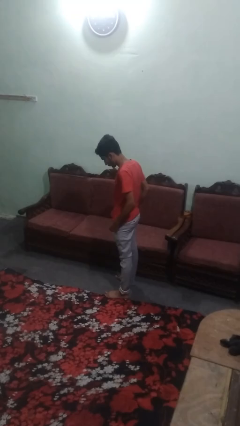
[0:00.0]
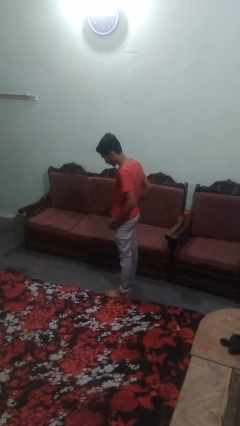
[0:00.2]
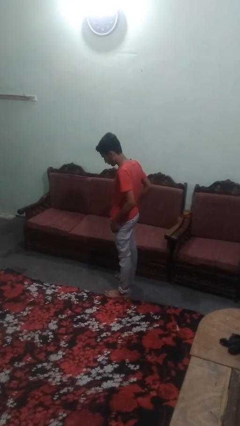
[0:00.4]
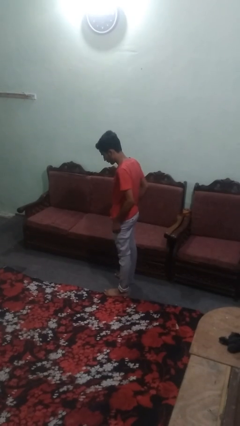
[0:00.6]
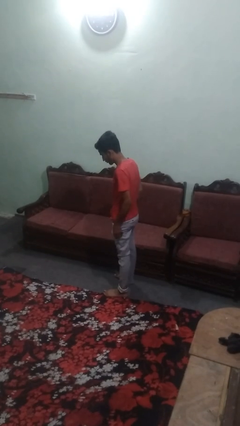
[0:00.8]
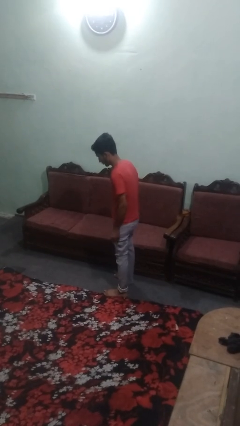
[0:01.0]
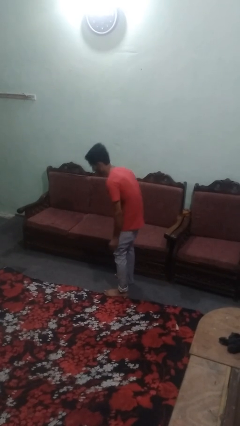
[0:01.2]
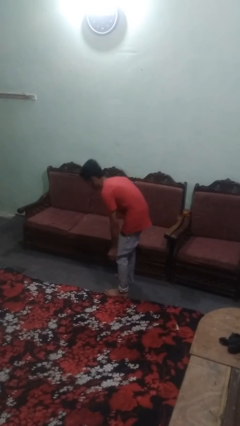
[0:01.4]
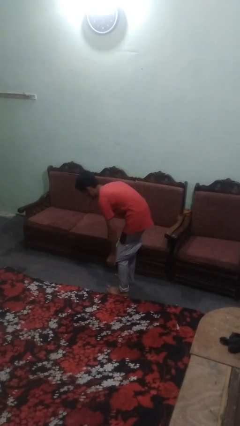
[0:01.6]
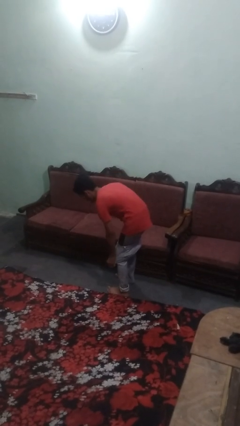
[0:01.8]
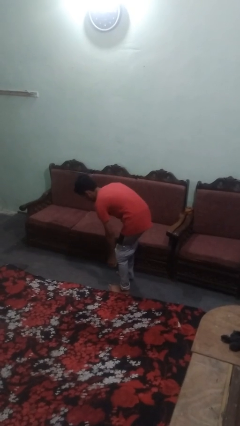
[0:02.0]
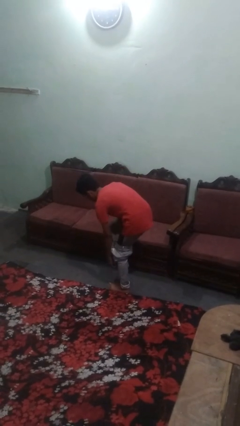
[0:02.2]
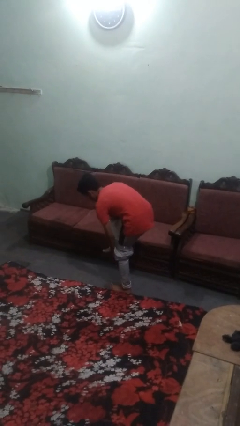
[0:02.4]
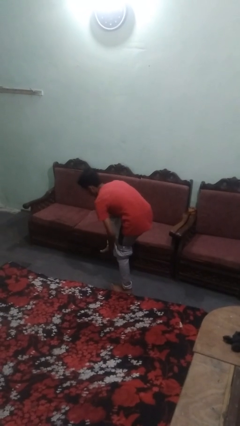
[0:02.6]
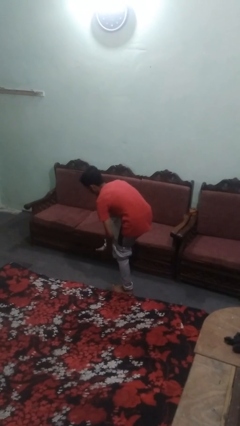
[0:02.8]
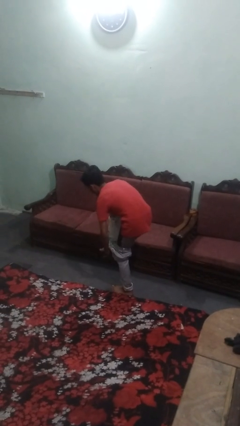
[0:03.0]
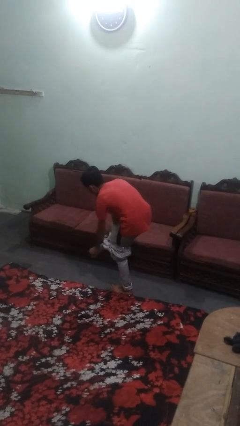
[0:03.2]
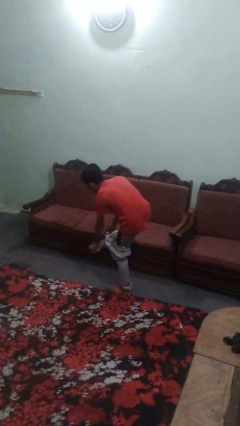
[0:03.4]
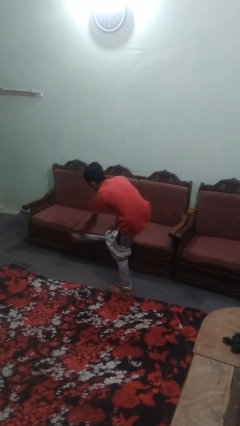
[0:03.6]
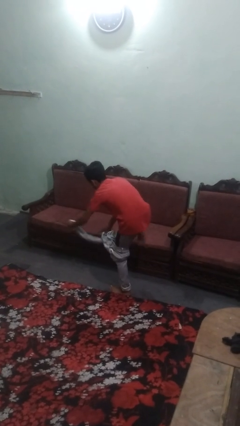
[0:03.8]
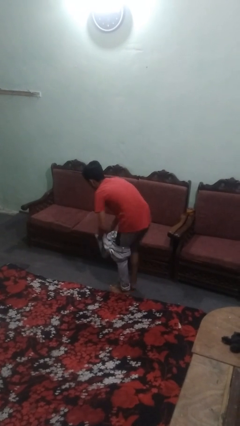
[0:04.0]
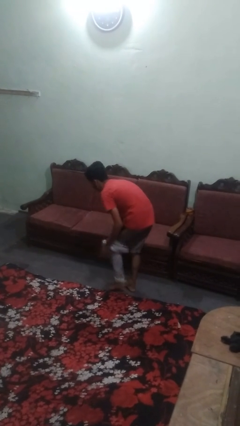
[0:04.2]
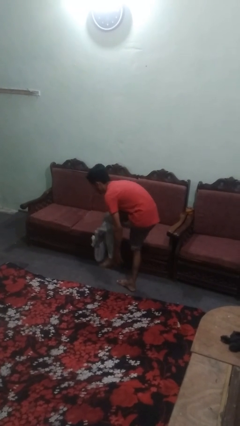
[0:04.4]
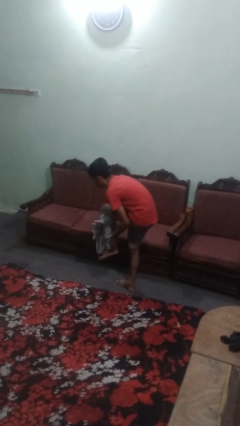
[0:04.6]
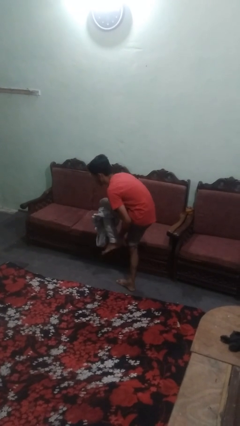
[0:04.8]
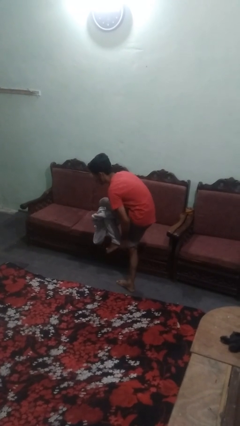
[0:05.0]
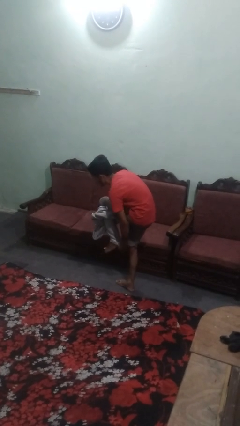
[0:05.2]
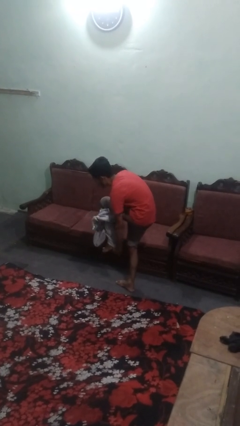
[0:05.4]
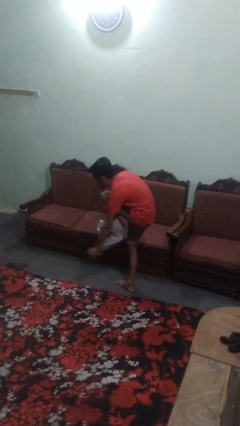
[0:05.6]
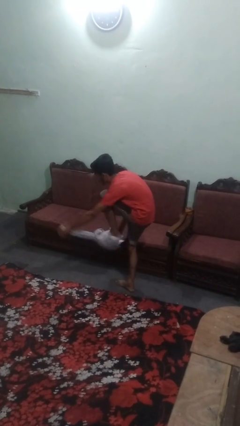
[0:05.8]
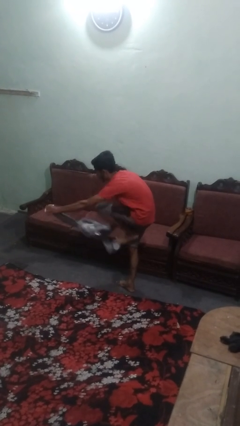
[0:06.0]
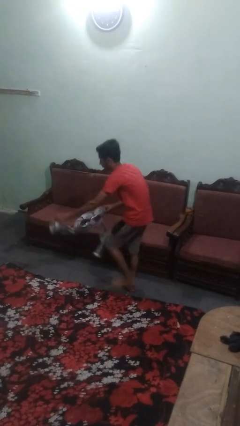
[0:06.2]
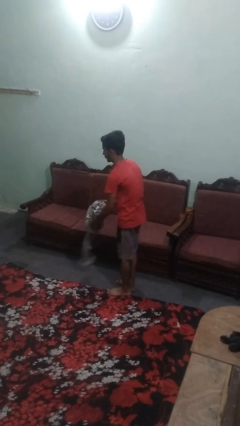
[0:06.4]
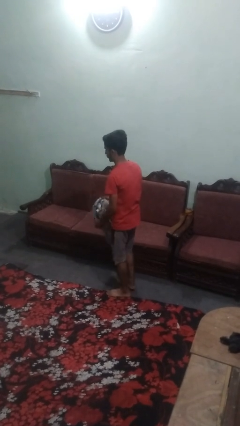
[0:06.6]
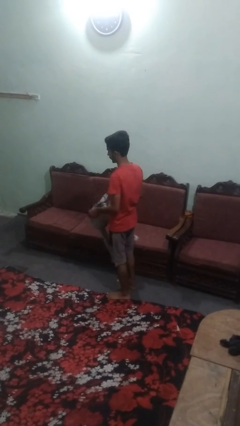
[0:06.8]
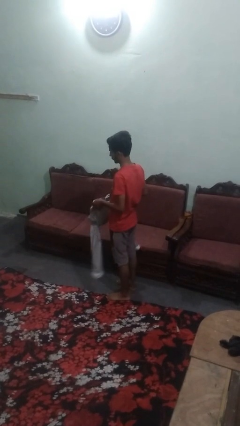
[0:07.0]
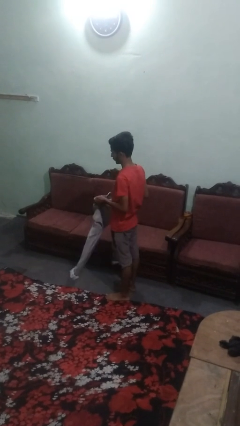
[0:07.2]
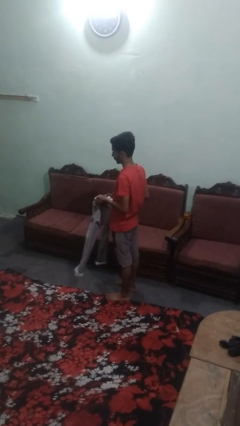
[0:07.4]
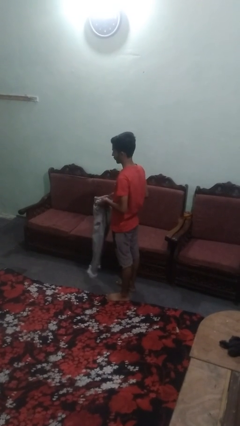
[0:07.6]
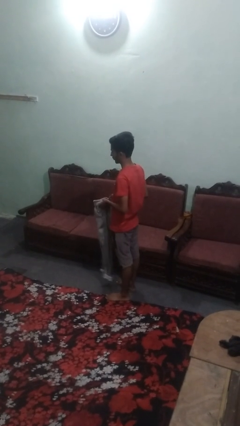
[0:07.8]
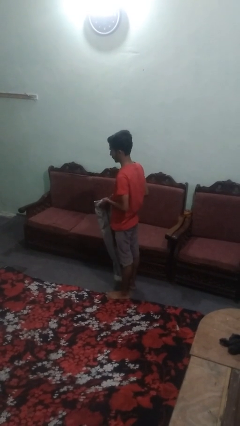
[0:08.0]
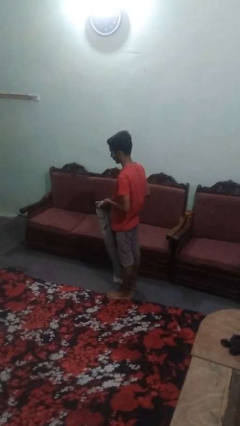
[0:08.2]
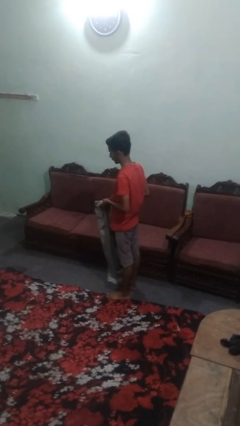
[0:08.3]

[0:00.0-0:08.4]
person puts on pants

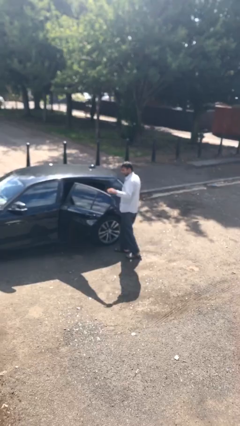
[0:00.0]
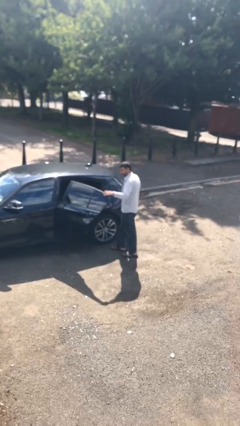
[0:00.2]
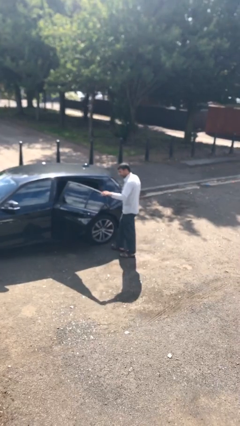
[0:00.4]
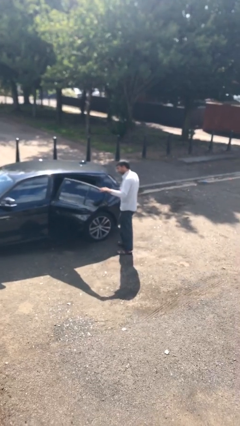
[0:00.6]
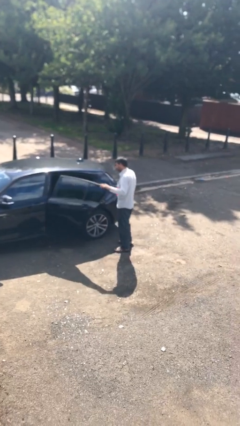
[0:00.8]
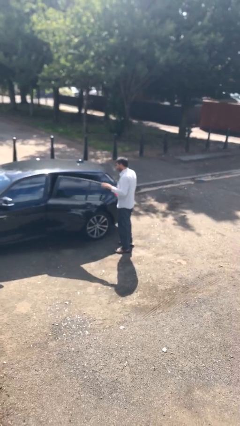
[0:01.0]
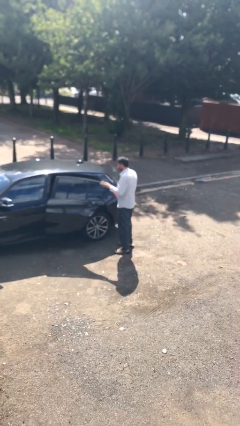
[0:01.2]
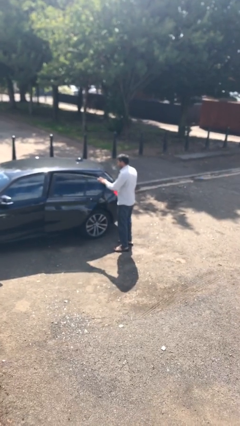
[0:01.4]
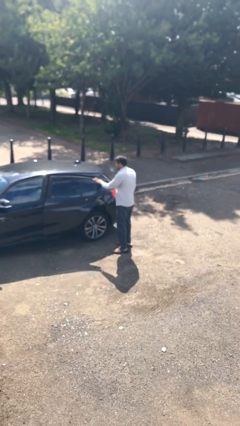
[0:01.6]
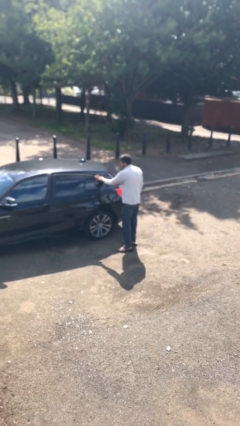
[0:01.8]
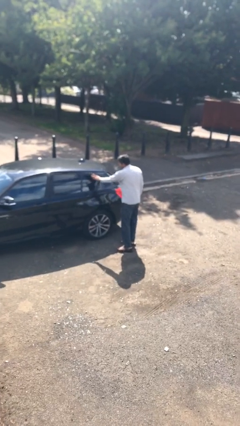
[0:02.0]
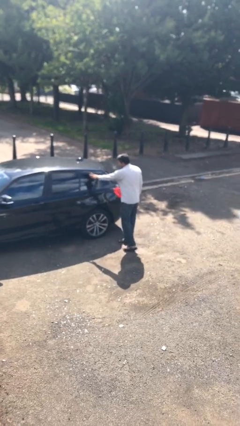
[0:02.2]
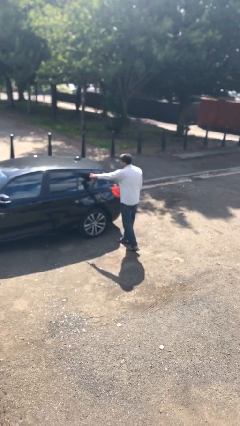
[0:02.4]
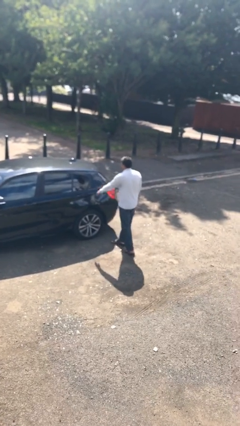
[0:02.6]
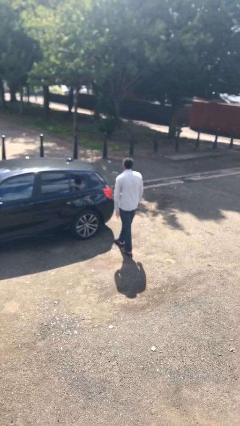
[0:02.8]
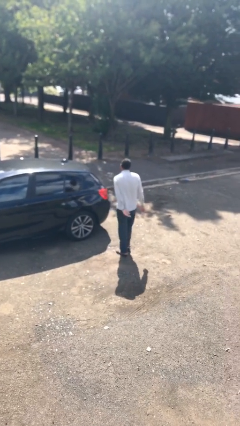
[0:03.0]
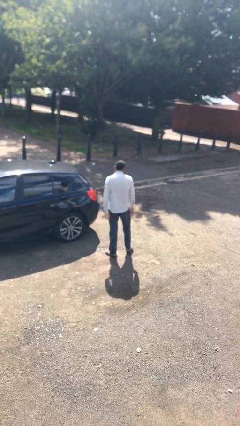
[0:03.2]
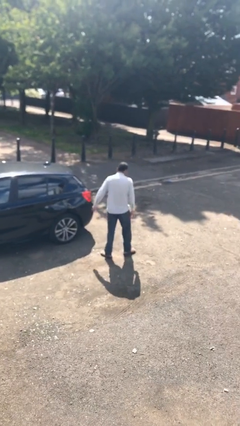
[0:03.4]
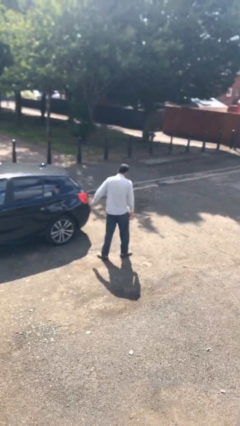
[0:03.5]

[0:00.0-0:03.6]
person closes car door

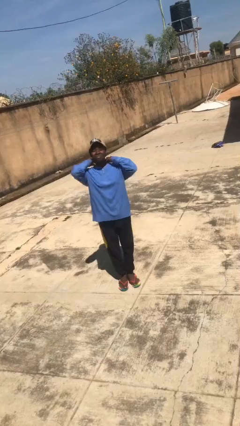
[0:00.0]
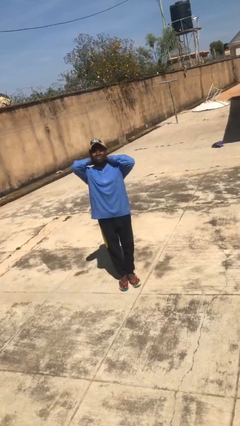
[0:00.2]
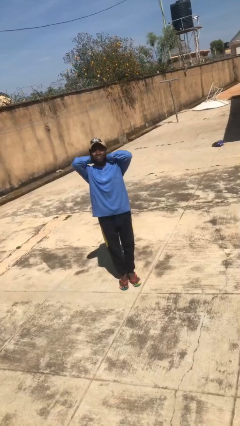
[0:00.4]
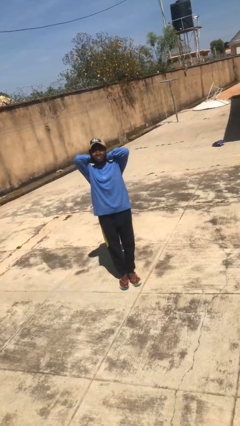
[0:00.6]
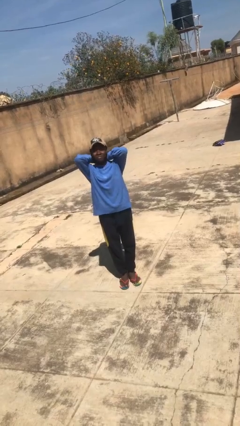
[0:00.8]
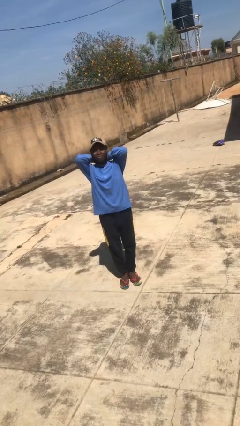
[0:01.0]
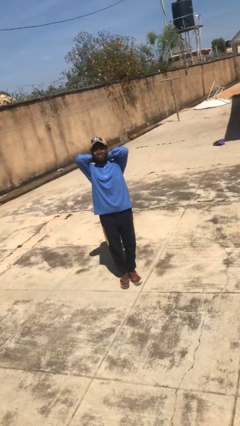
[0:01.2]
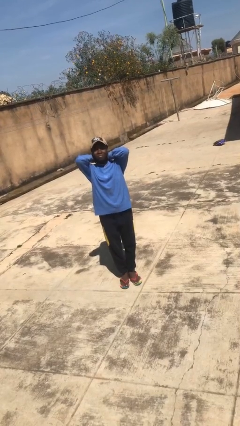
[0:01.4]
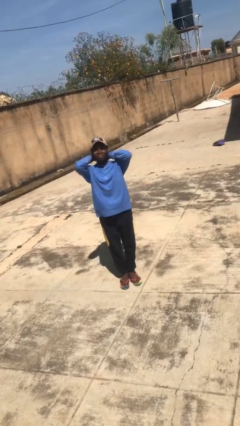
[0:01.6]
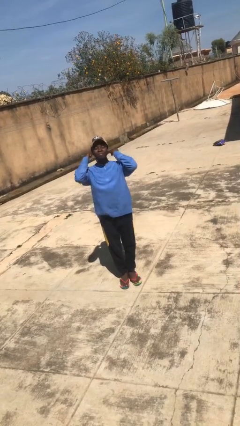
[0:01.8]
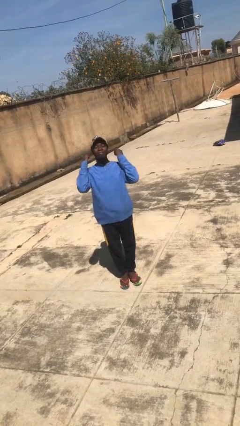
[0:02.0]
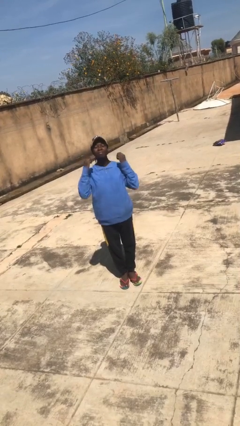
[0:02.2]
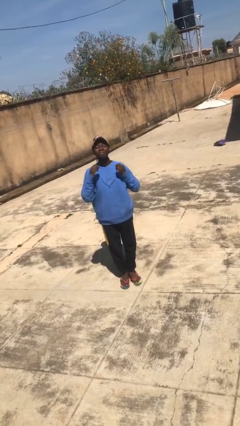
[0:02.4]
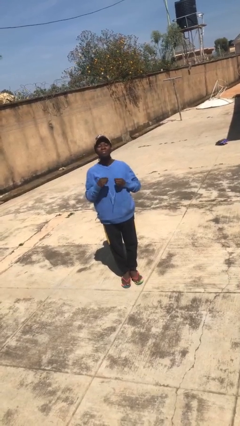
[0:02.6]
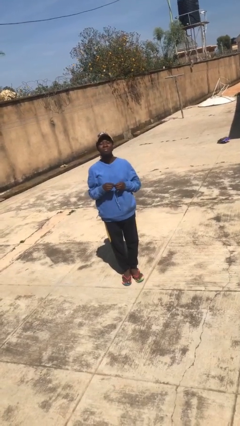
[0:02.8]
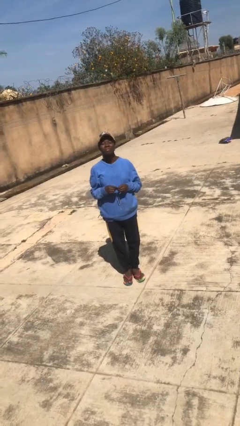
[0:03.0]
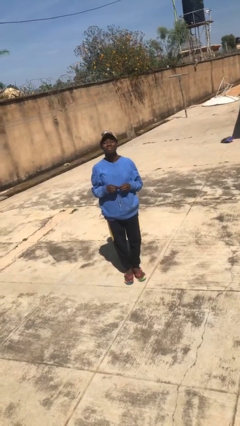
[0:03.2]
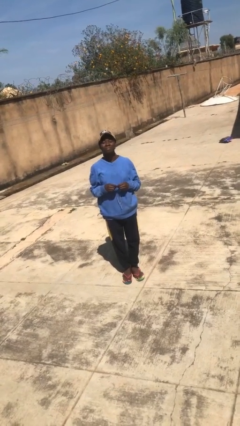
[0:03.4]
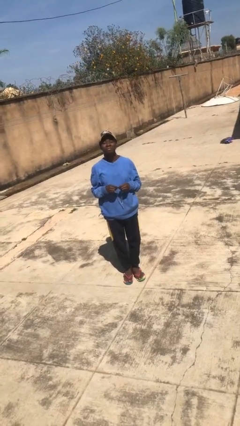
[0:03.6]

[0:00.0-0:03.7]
person takes off necklace

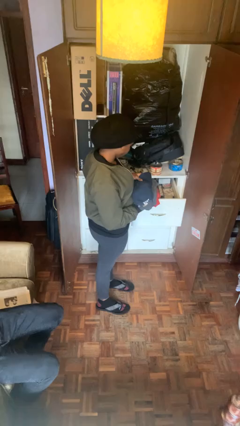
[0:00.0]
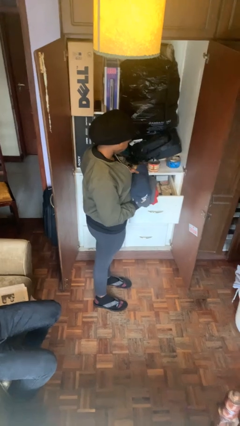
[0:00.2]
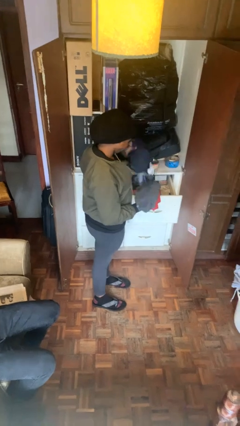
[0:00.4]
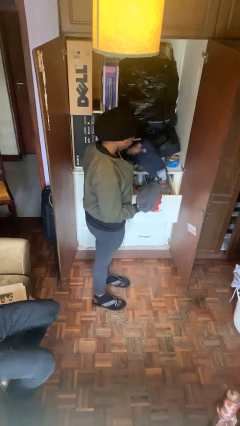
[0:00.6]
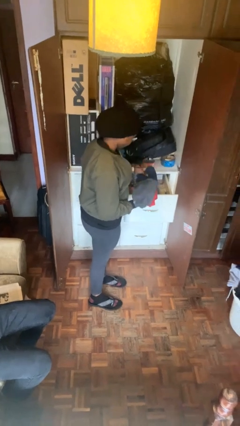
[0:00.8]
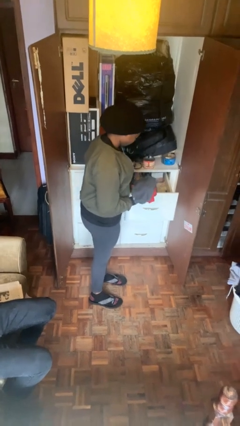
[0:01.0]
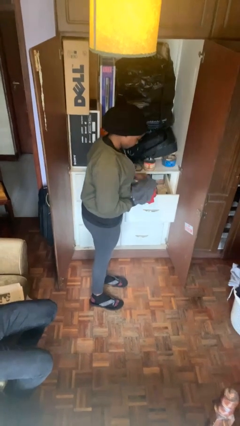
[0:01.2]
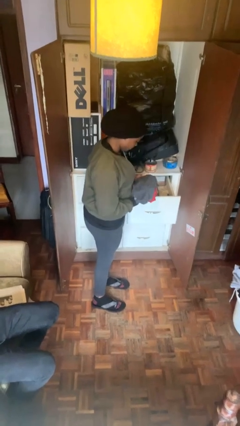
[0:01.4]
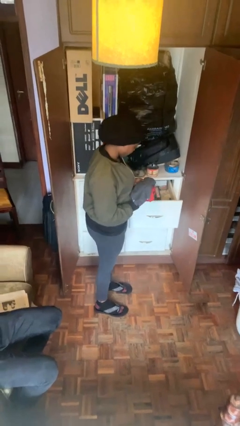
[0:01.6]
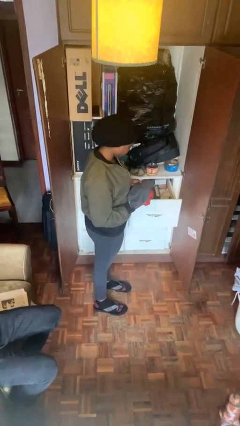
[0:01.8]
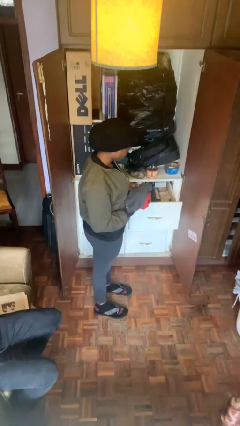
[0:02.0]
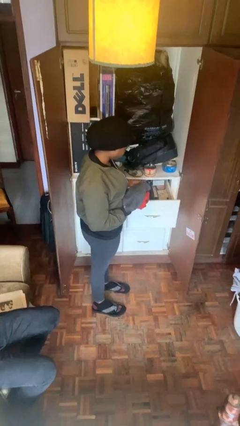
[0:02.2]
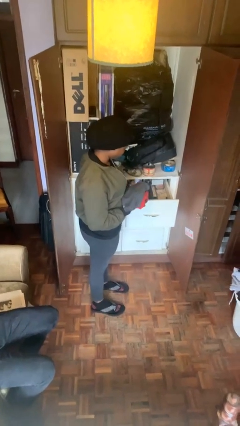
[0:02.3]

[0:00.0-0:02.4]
person puts clothes into dresser
